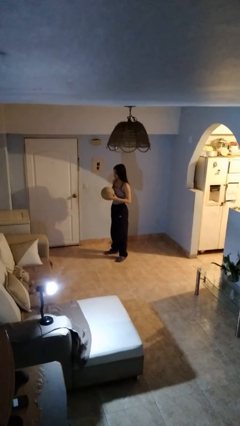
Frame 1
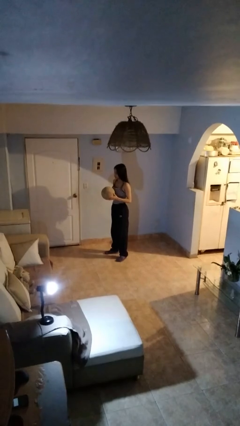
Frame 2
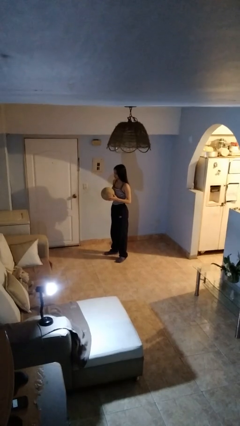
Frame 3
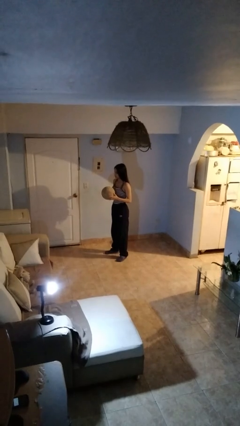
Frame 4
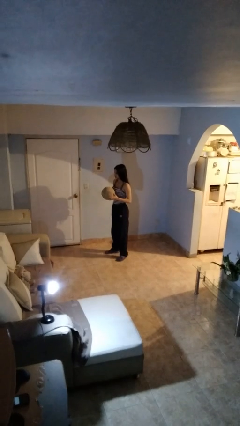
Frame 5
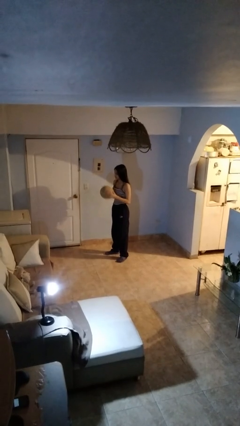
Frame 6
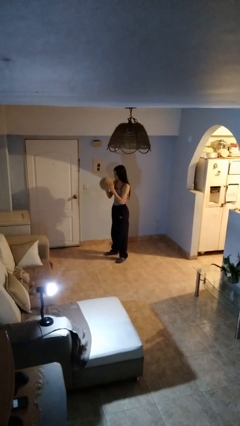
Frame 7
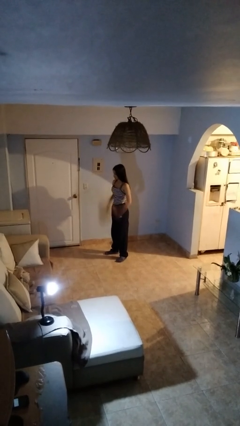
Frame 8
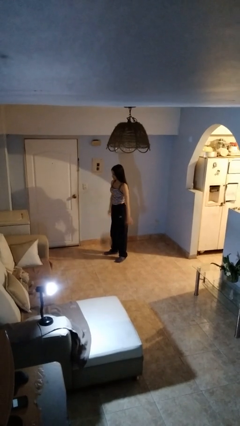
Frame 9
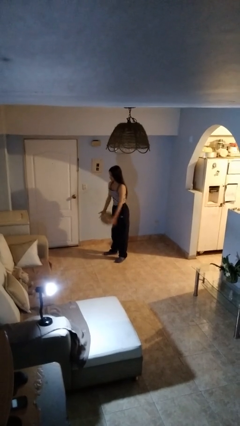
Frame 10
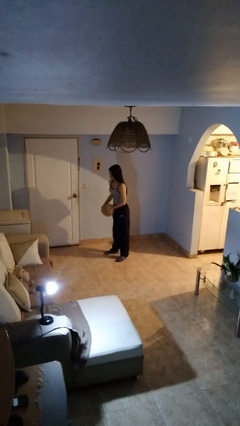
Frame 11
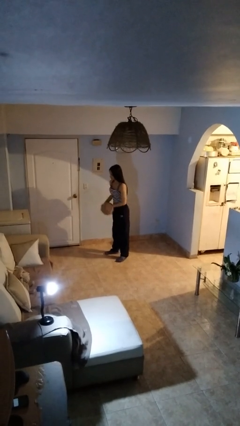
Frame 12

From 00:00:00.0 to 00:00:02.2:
person bounces ball on floor

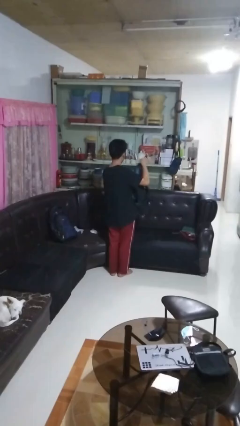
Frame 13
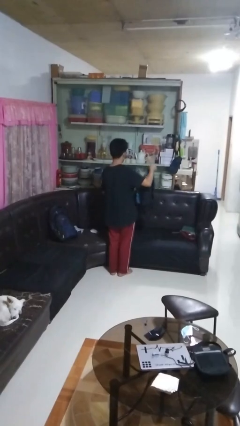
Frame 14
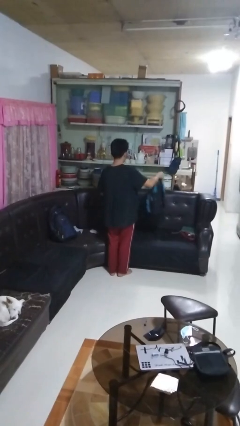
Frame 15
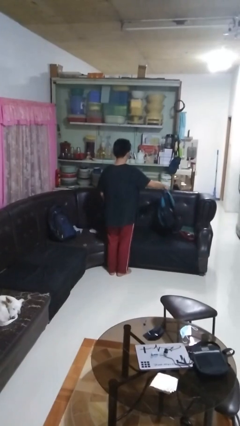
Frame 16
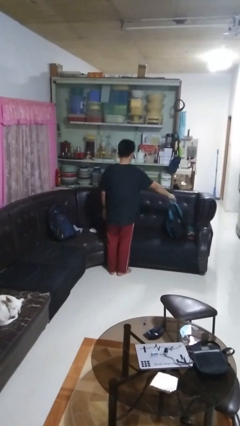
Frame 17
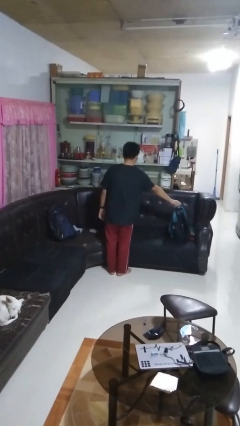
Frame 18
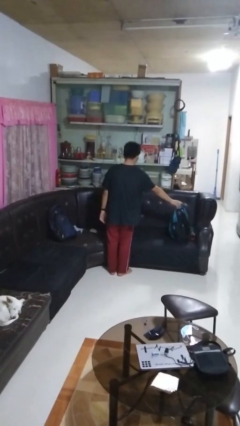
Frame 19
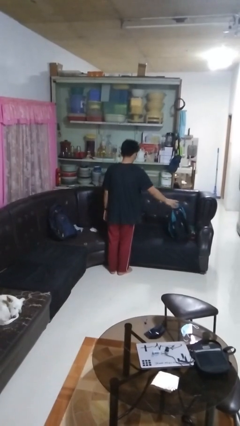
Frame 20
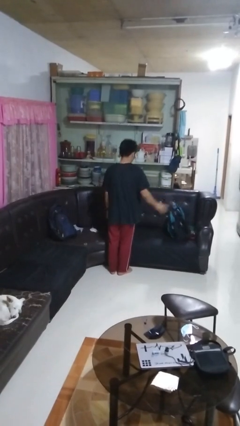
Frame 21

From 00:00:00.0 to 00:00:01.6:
person puts down object on couch

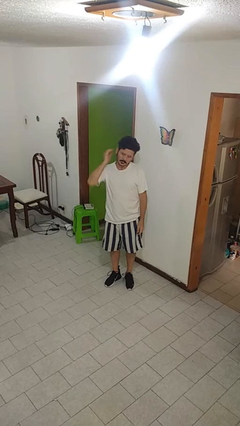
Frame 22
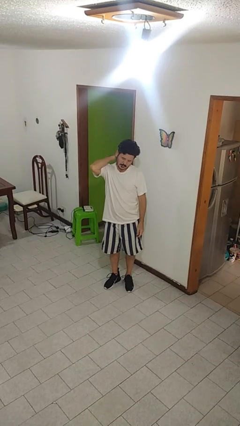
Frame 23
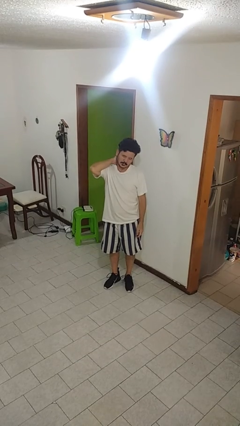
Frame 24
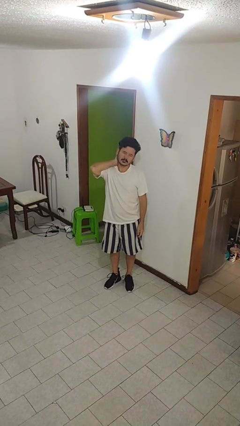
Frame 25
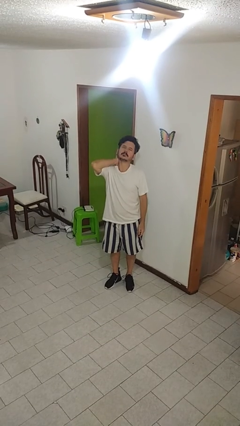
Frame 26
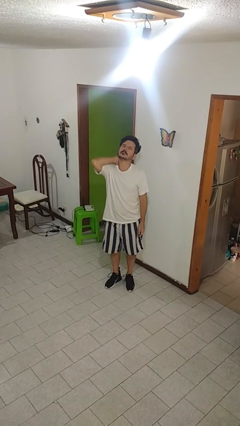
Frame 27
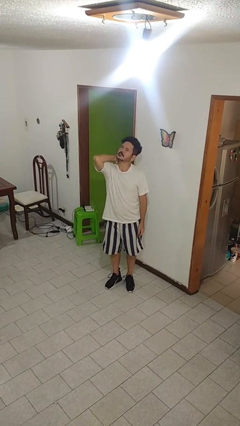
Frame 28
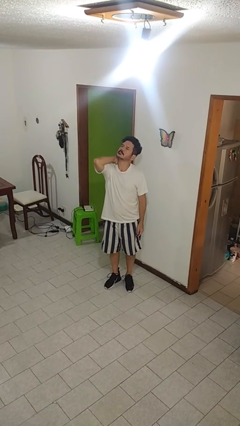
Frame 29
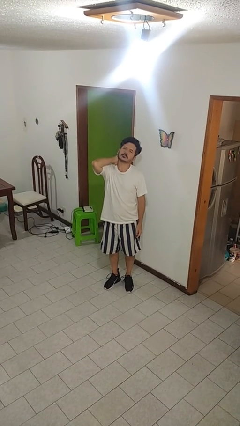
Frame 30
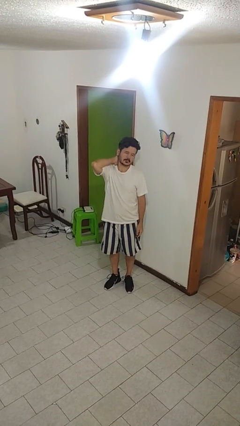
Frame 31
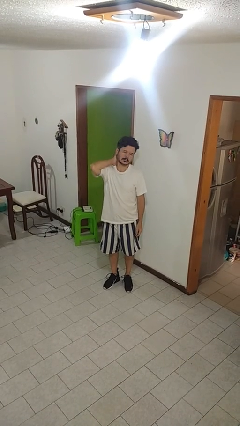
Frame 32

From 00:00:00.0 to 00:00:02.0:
person rubs neck

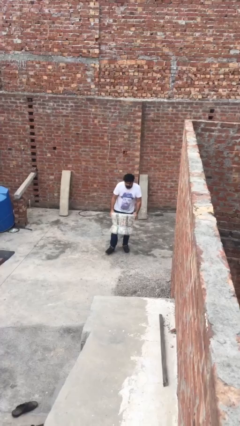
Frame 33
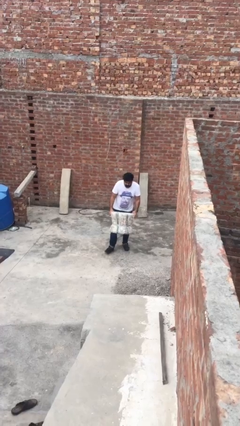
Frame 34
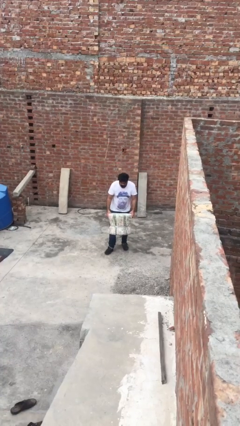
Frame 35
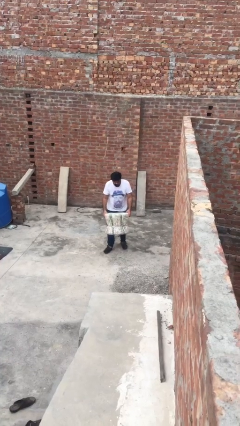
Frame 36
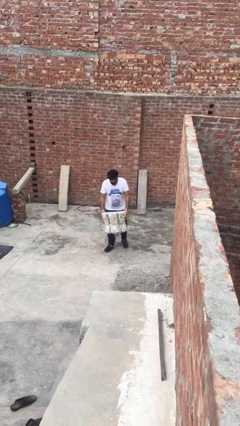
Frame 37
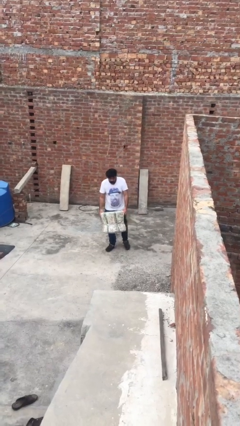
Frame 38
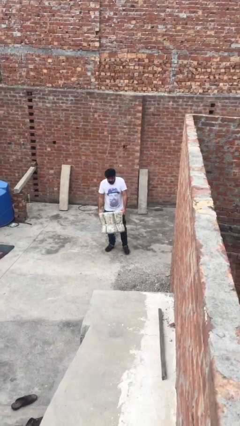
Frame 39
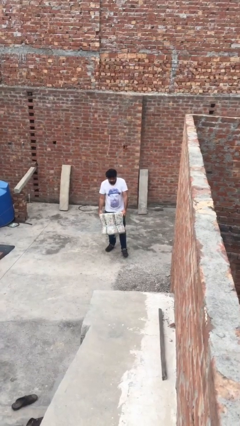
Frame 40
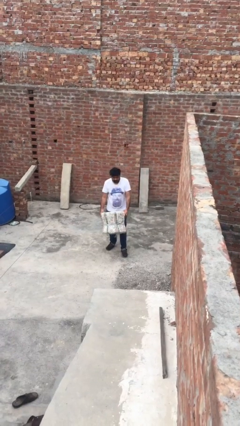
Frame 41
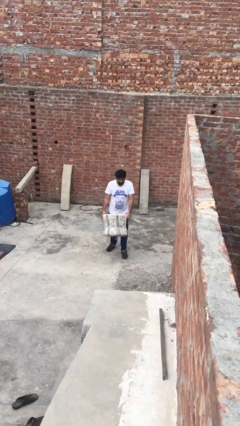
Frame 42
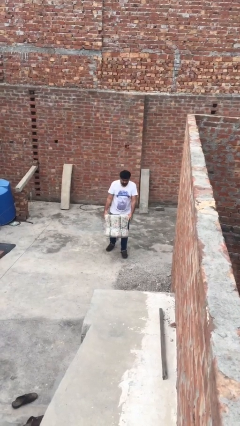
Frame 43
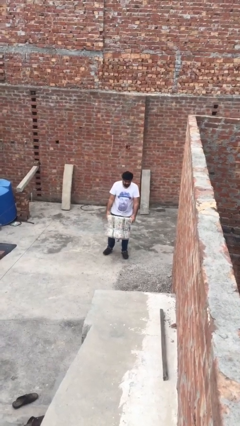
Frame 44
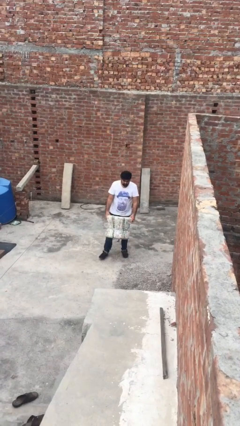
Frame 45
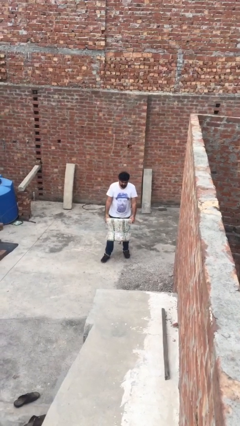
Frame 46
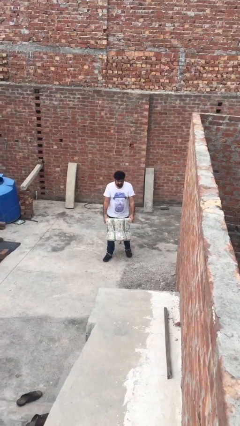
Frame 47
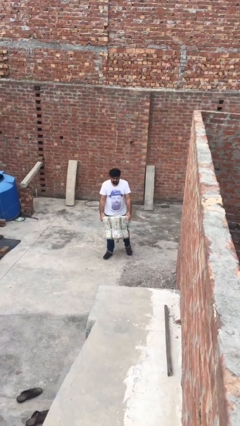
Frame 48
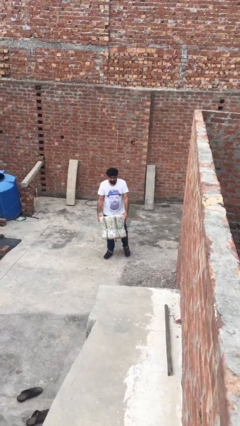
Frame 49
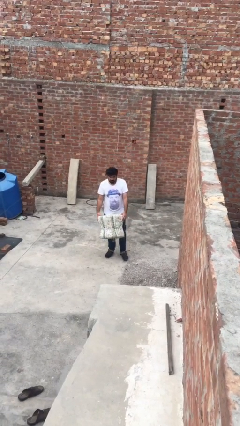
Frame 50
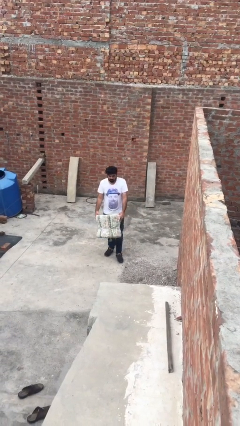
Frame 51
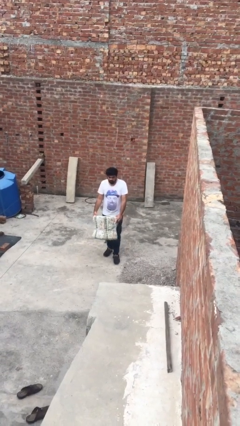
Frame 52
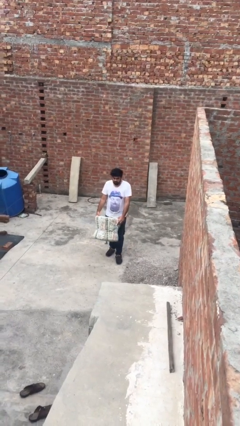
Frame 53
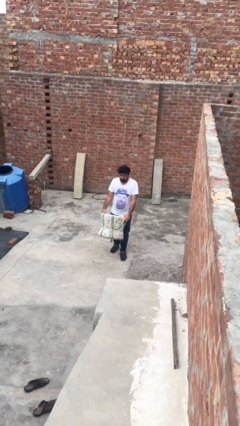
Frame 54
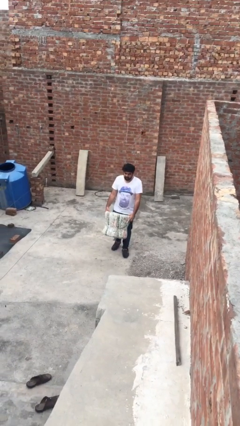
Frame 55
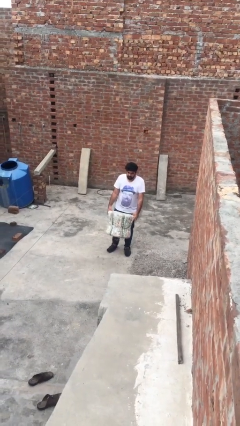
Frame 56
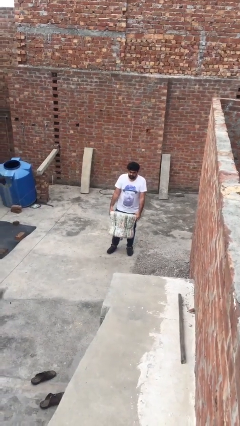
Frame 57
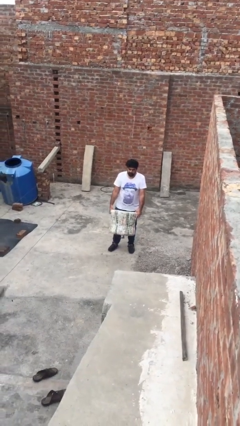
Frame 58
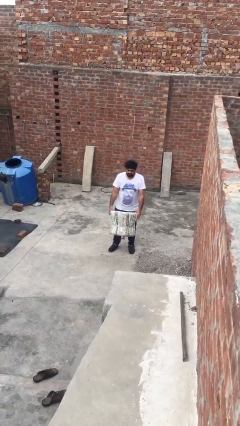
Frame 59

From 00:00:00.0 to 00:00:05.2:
person carries heavy object

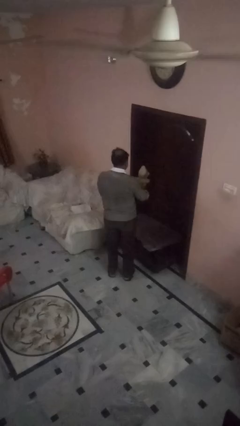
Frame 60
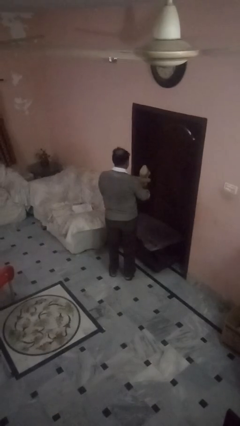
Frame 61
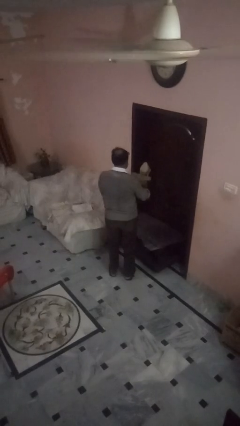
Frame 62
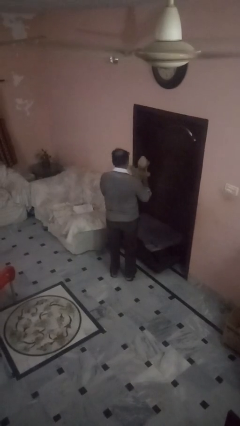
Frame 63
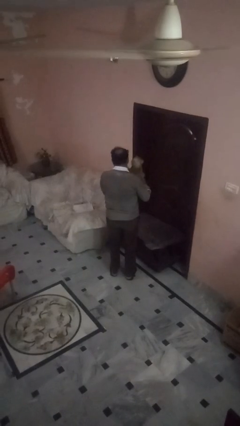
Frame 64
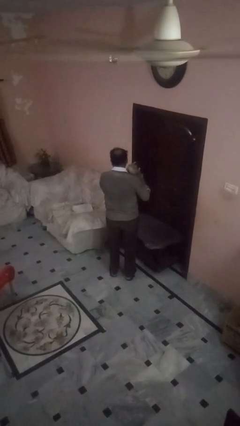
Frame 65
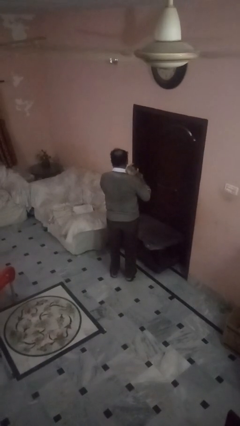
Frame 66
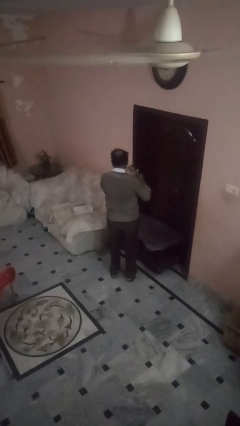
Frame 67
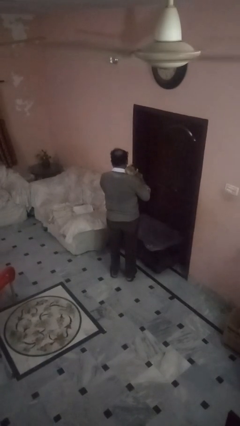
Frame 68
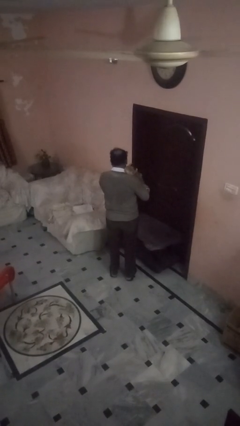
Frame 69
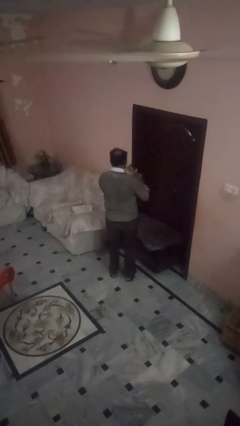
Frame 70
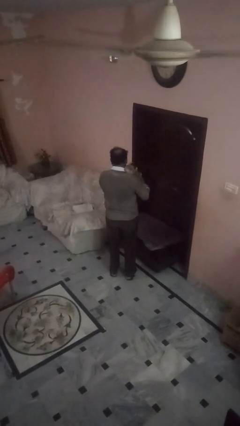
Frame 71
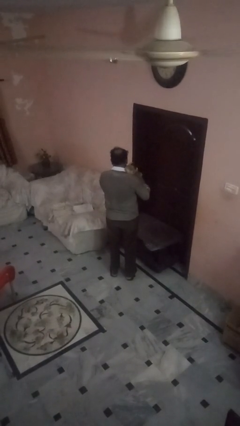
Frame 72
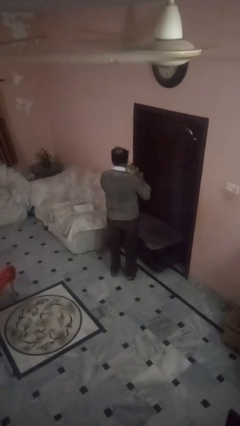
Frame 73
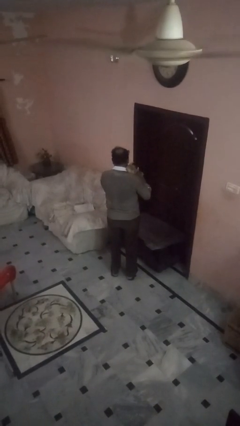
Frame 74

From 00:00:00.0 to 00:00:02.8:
person hugs stuffed animal

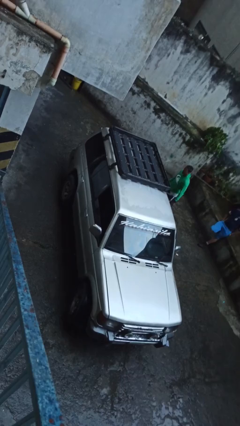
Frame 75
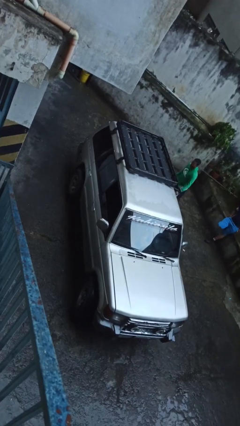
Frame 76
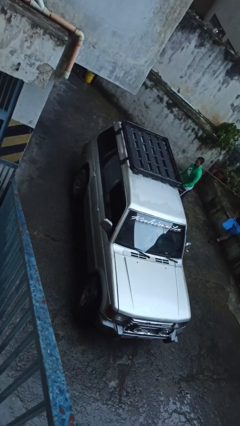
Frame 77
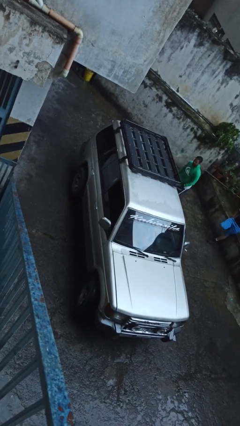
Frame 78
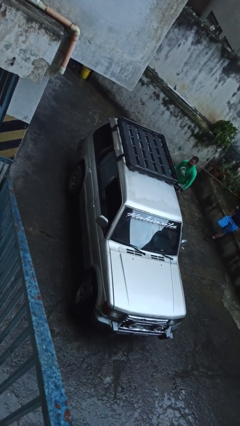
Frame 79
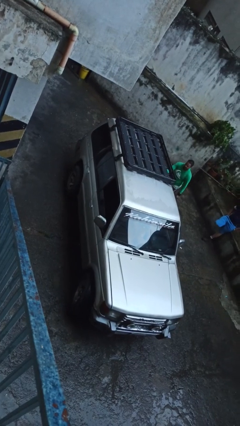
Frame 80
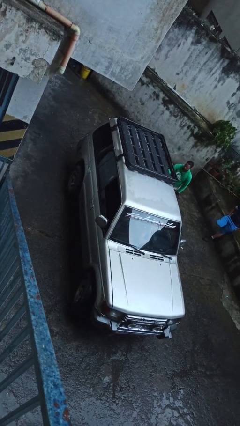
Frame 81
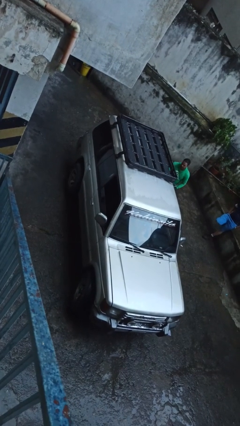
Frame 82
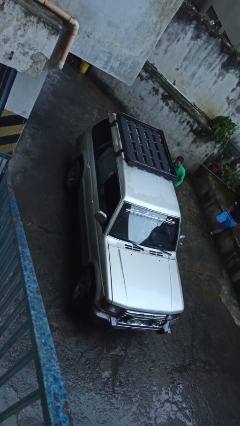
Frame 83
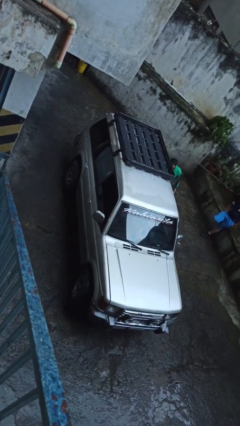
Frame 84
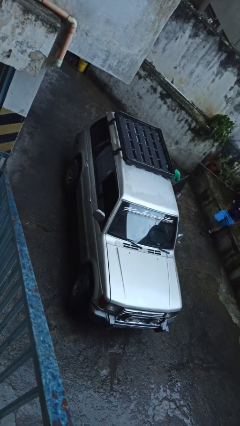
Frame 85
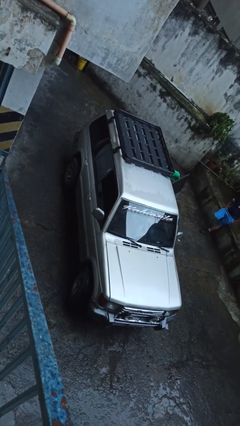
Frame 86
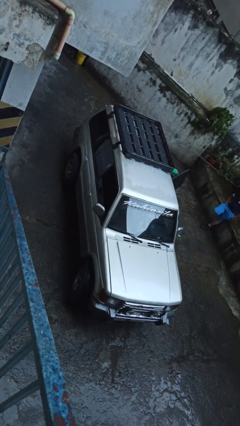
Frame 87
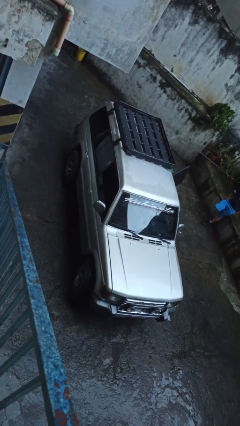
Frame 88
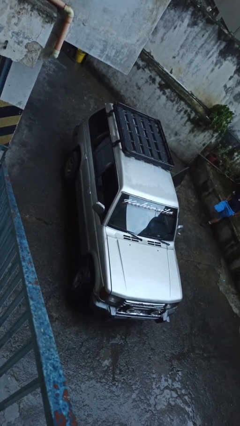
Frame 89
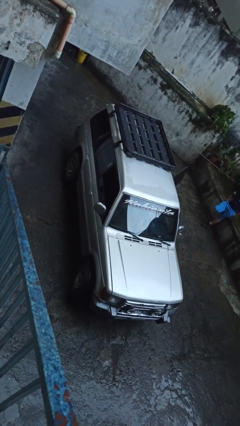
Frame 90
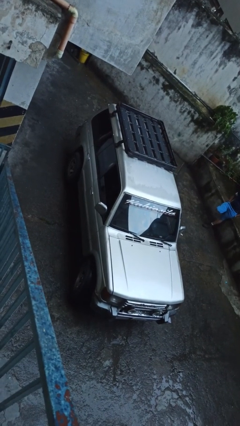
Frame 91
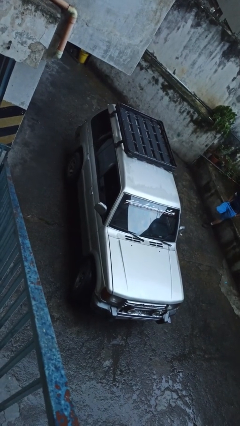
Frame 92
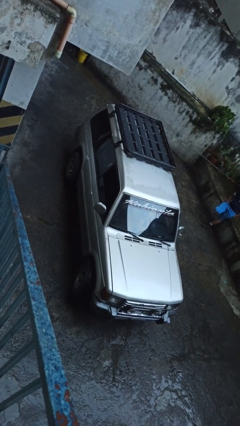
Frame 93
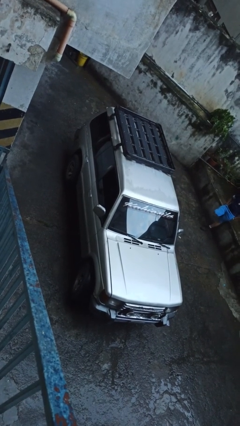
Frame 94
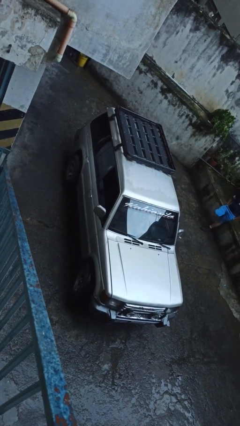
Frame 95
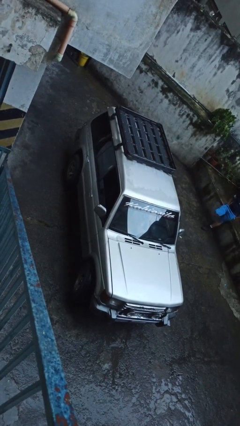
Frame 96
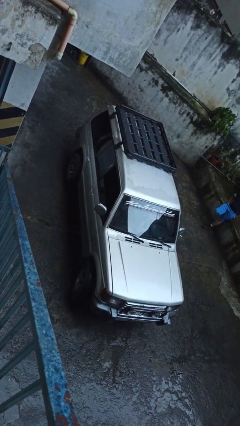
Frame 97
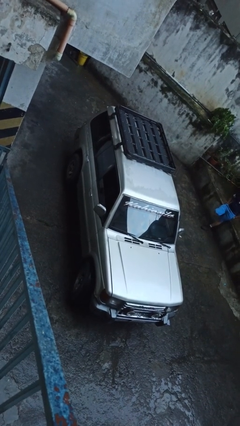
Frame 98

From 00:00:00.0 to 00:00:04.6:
car picks up person
